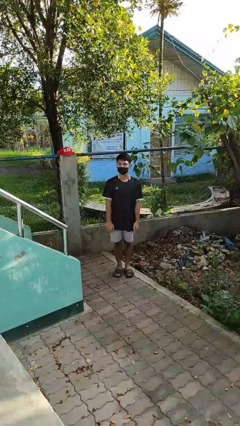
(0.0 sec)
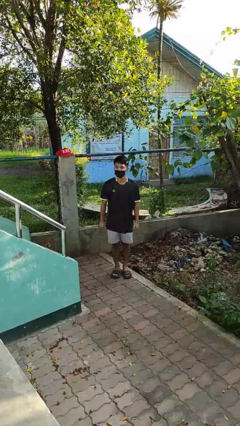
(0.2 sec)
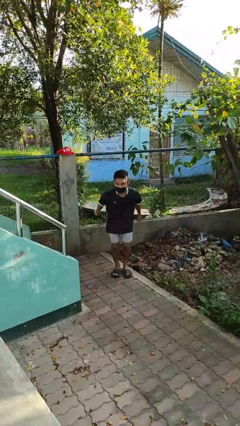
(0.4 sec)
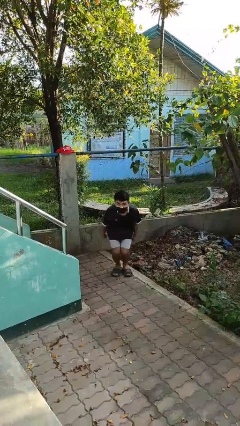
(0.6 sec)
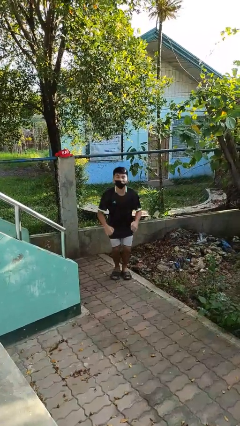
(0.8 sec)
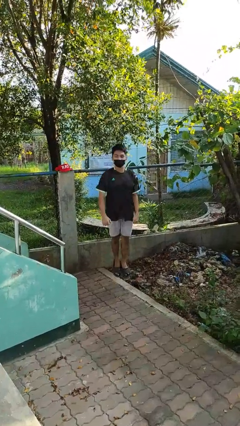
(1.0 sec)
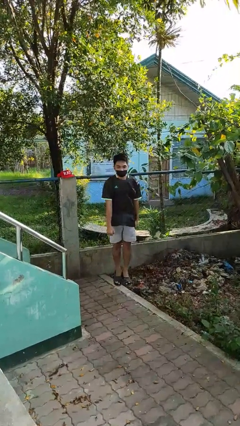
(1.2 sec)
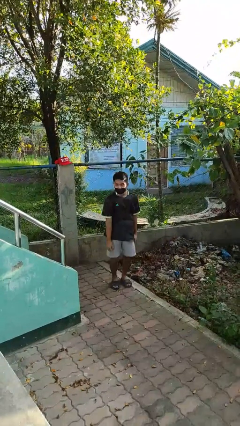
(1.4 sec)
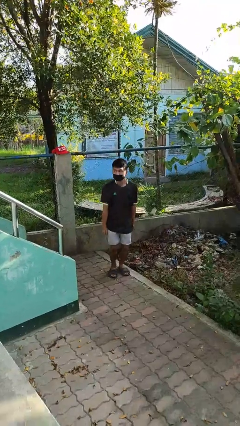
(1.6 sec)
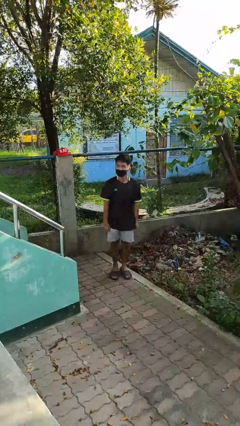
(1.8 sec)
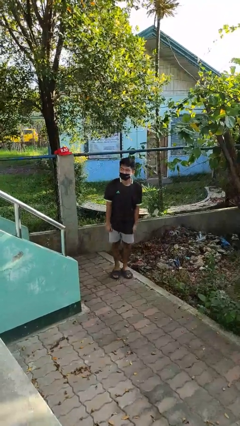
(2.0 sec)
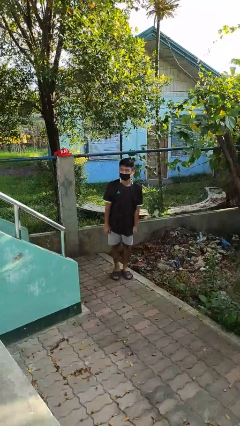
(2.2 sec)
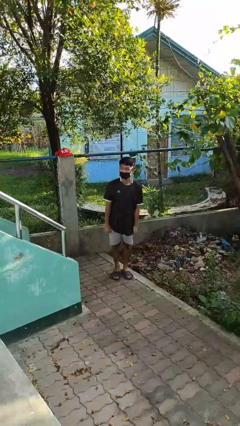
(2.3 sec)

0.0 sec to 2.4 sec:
person jumps

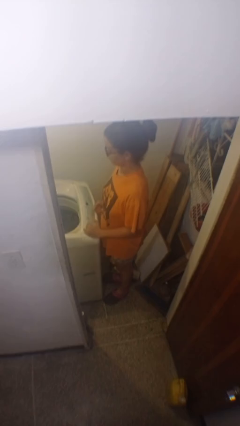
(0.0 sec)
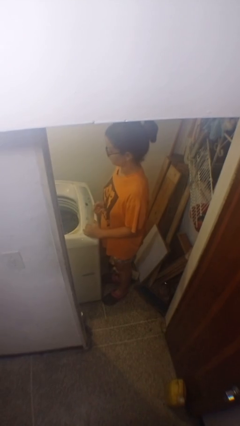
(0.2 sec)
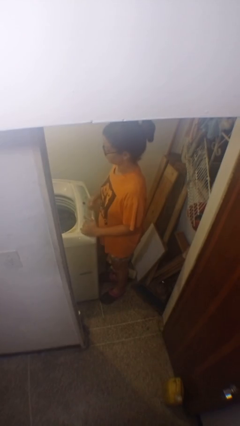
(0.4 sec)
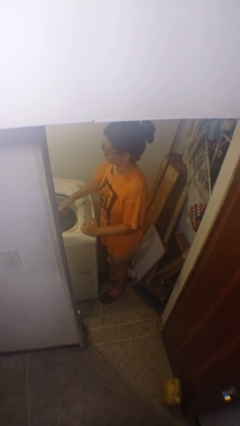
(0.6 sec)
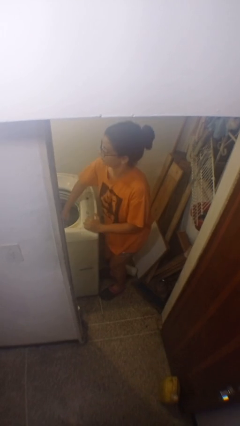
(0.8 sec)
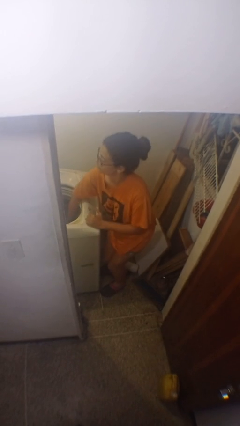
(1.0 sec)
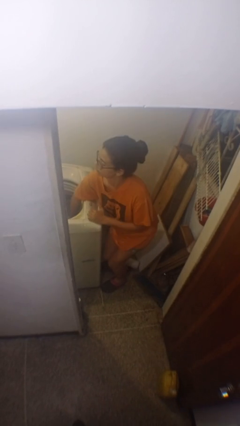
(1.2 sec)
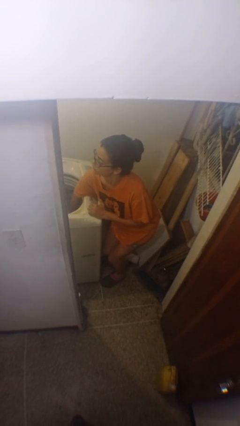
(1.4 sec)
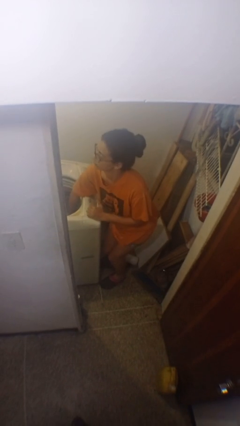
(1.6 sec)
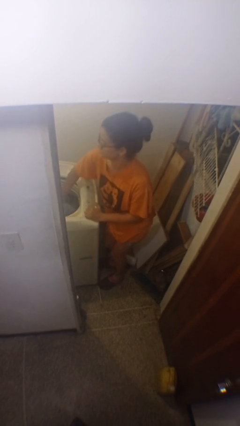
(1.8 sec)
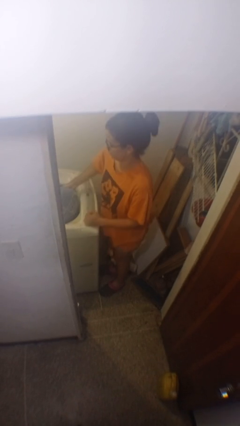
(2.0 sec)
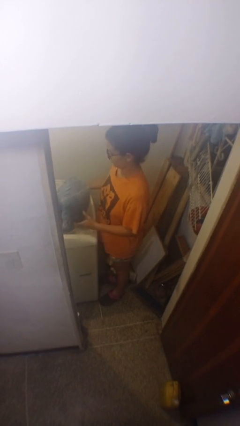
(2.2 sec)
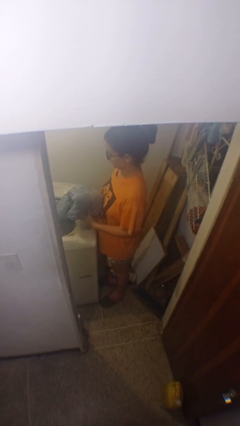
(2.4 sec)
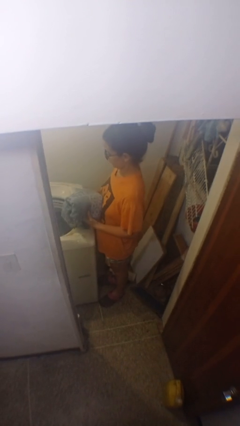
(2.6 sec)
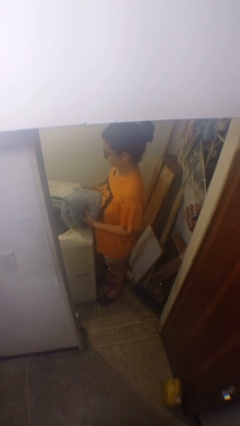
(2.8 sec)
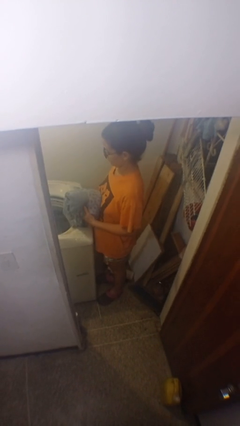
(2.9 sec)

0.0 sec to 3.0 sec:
person unloads clotheswasher

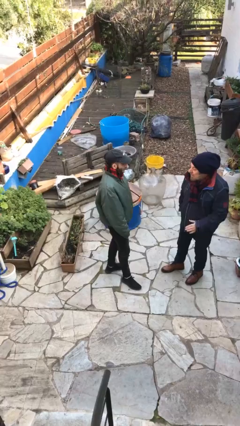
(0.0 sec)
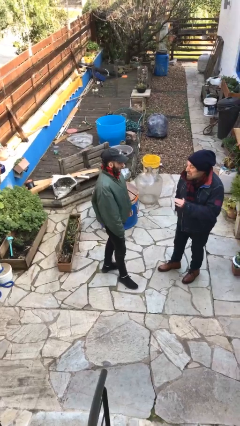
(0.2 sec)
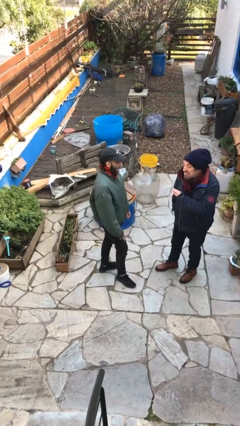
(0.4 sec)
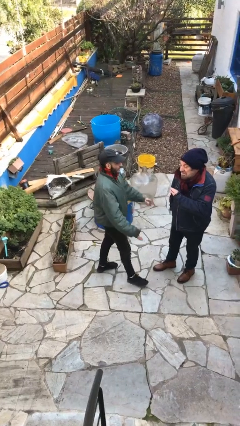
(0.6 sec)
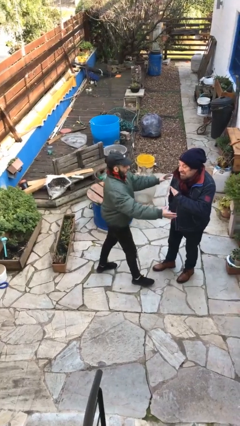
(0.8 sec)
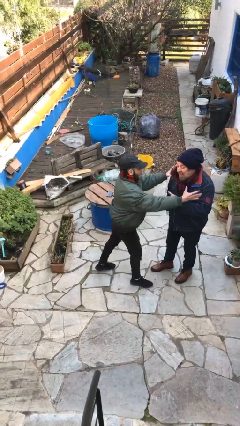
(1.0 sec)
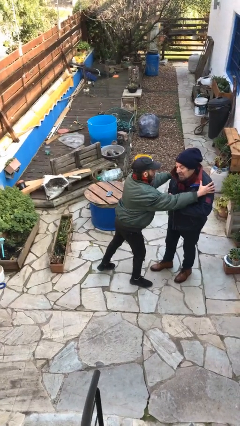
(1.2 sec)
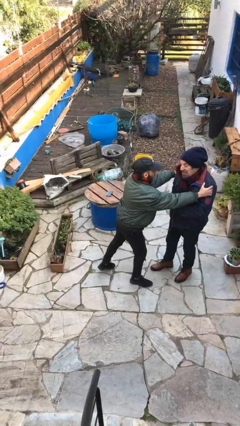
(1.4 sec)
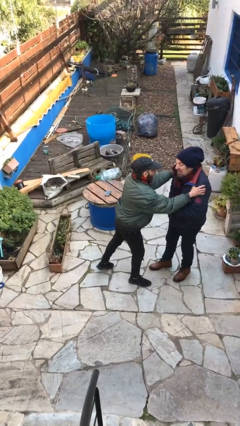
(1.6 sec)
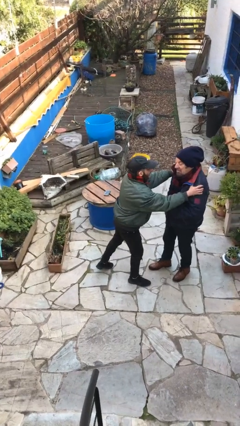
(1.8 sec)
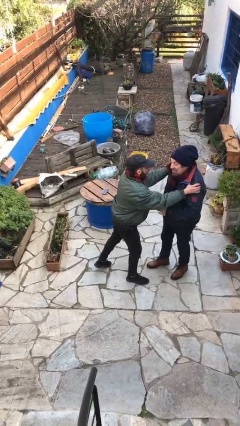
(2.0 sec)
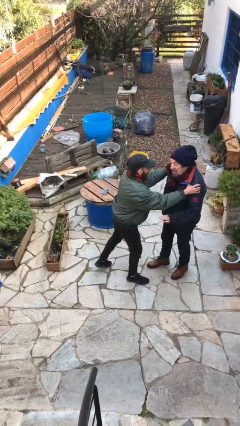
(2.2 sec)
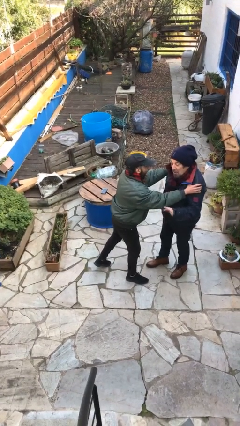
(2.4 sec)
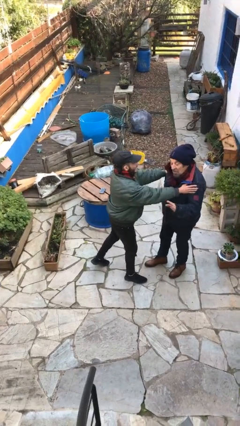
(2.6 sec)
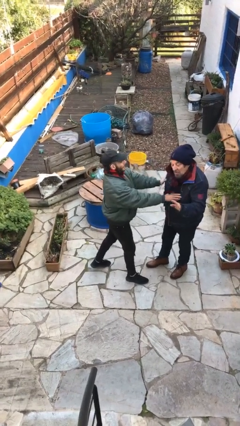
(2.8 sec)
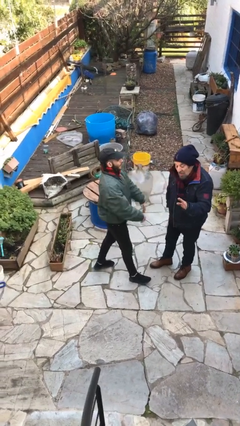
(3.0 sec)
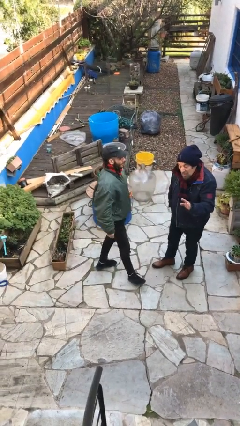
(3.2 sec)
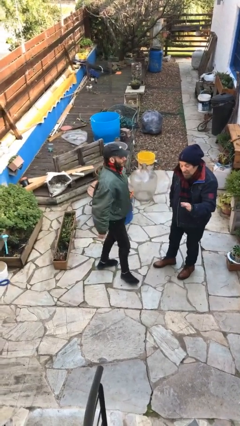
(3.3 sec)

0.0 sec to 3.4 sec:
person pounds shoulders of person

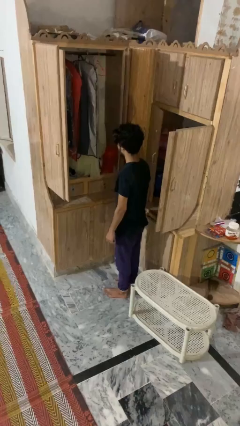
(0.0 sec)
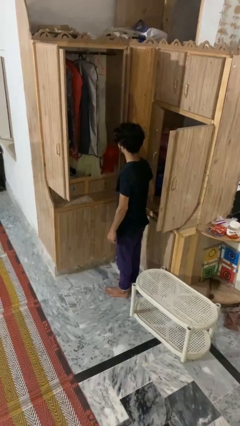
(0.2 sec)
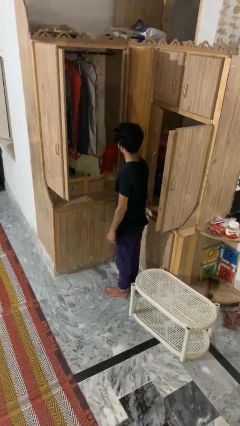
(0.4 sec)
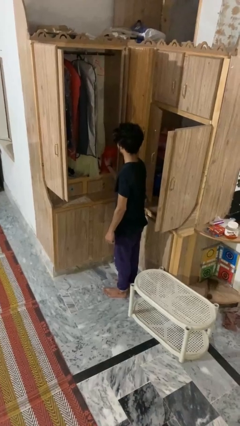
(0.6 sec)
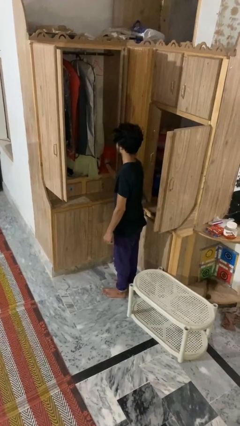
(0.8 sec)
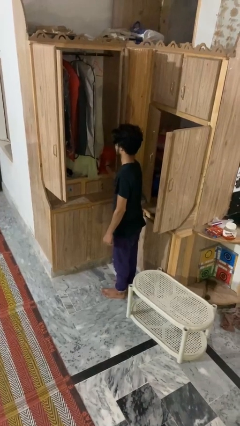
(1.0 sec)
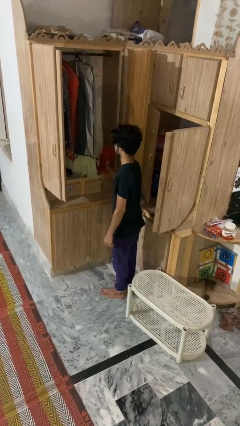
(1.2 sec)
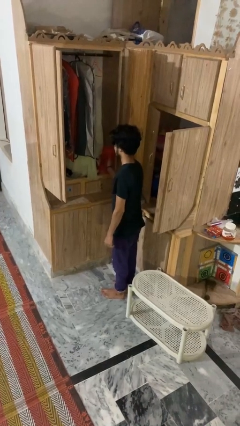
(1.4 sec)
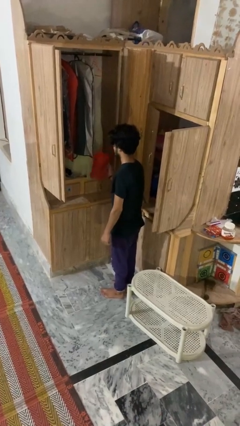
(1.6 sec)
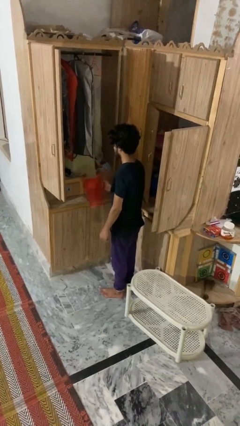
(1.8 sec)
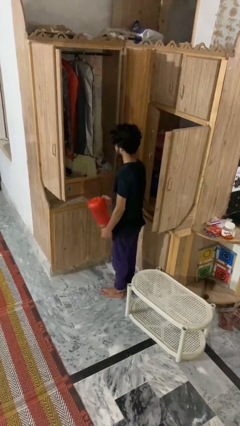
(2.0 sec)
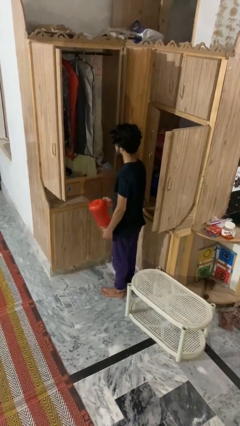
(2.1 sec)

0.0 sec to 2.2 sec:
person picks up object from cabinet

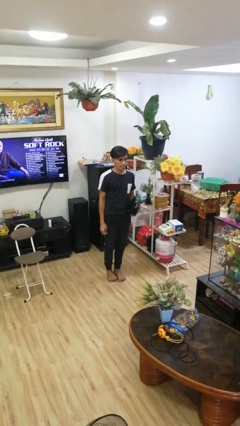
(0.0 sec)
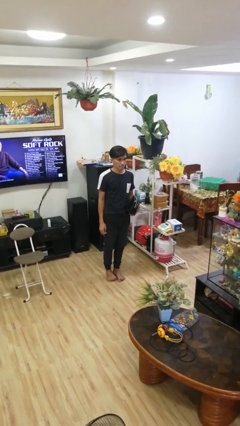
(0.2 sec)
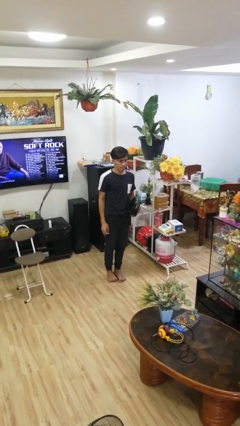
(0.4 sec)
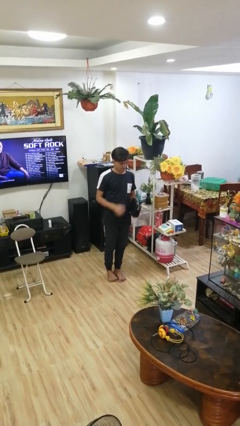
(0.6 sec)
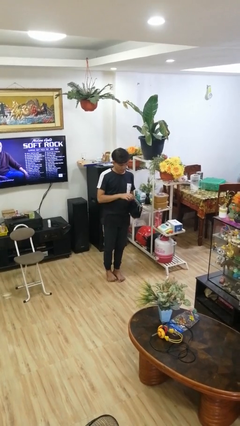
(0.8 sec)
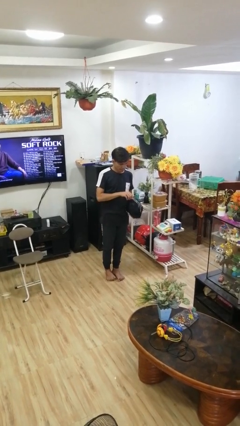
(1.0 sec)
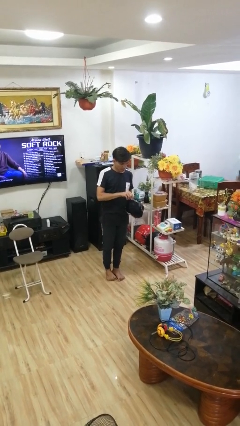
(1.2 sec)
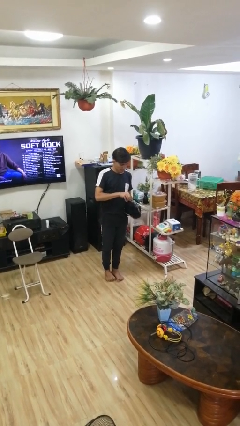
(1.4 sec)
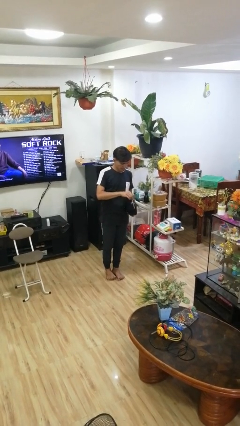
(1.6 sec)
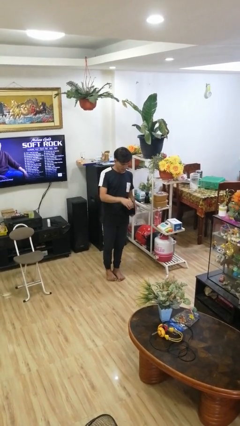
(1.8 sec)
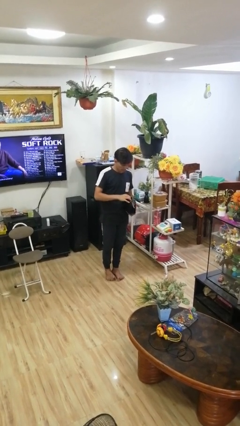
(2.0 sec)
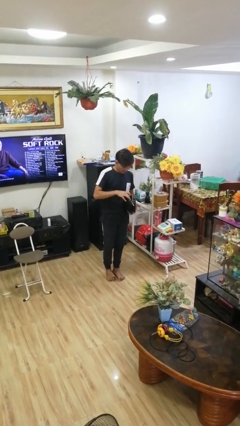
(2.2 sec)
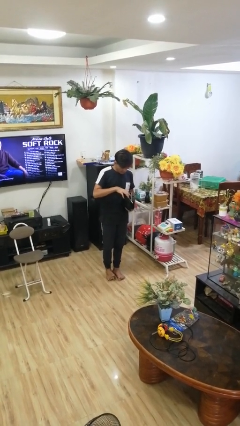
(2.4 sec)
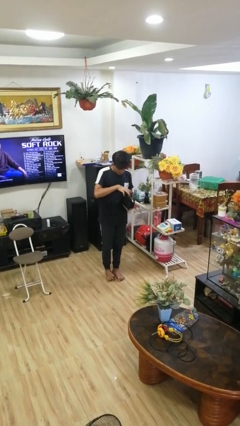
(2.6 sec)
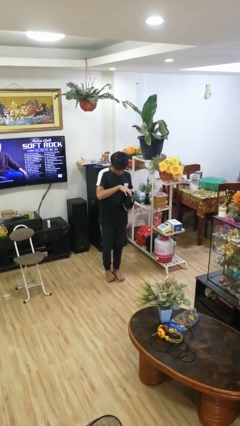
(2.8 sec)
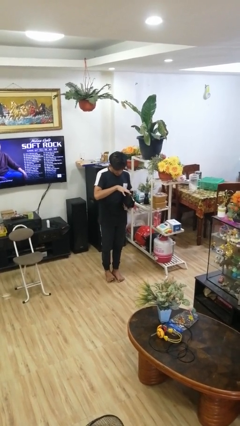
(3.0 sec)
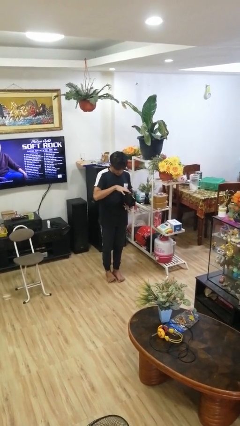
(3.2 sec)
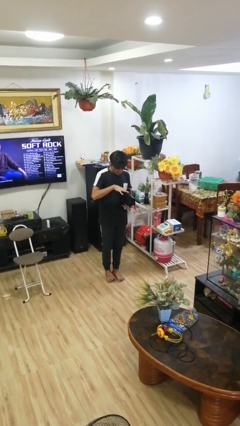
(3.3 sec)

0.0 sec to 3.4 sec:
person searches in purse

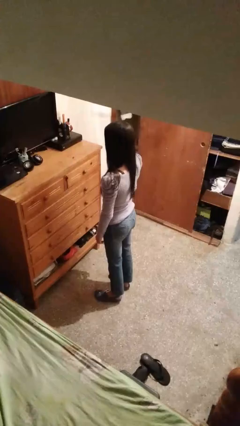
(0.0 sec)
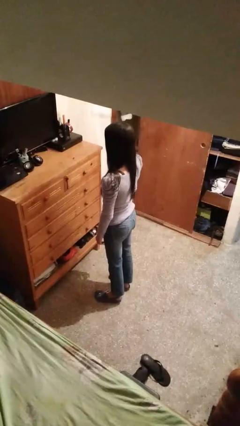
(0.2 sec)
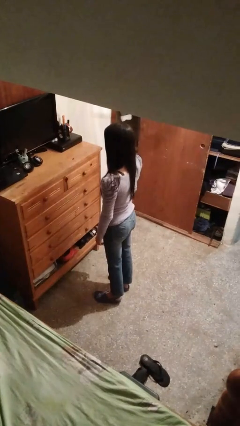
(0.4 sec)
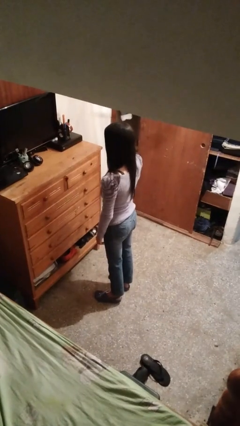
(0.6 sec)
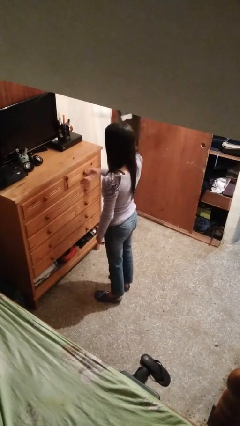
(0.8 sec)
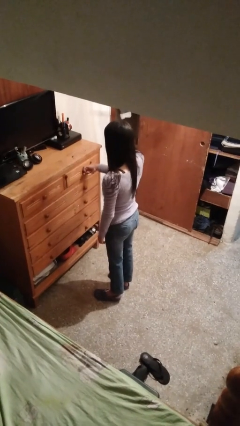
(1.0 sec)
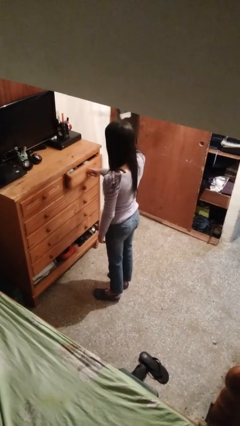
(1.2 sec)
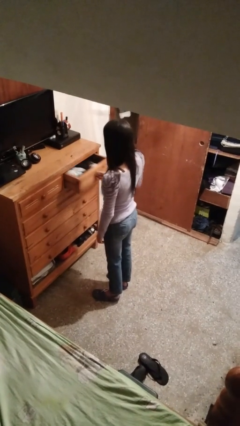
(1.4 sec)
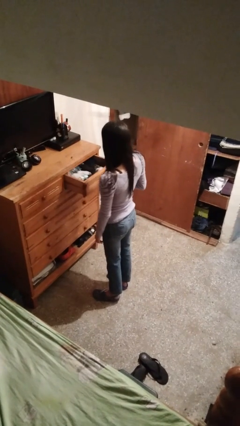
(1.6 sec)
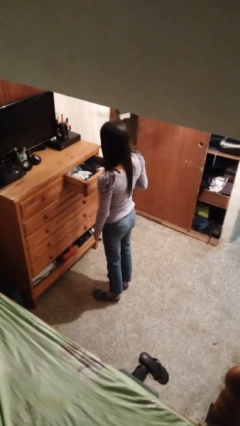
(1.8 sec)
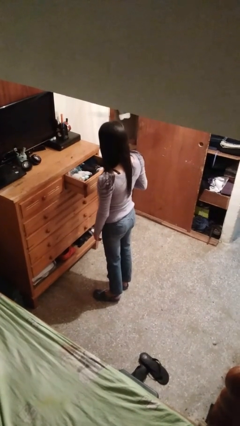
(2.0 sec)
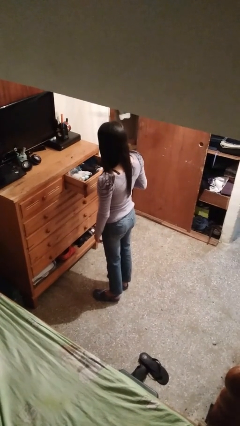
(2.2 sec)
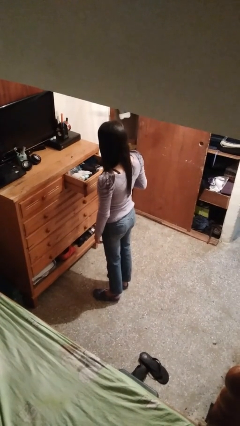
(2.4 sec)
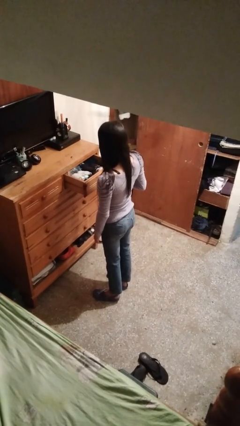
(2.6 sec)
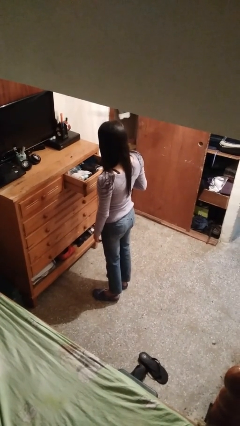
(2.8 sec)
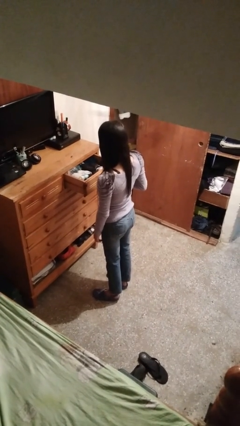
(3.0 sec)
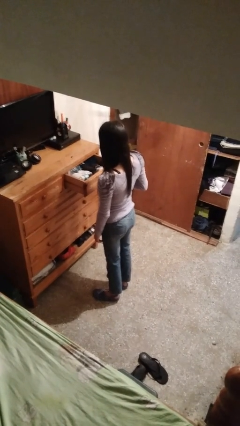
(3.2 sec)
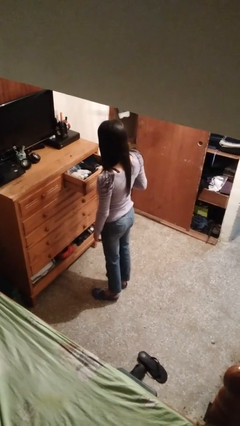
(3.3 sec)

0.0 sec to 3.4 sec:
person opens dresser drawer
